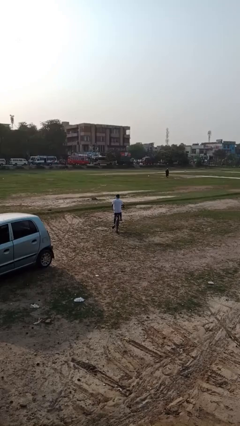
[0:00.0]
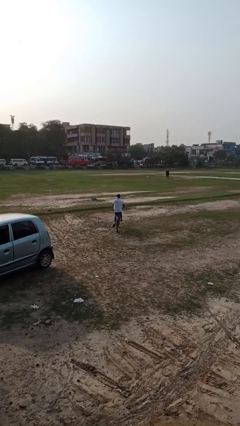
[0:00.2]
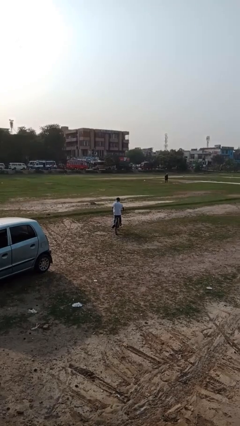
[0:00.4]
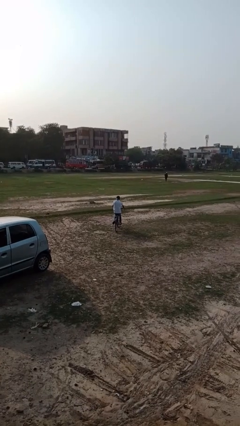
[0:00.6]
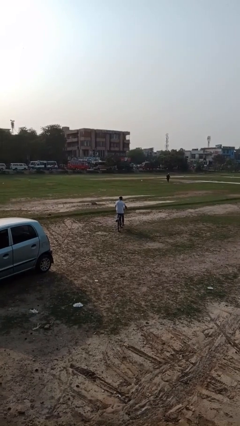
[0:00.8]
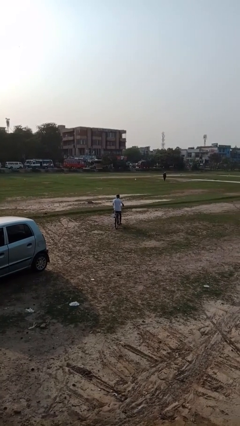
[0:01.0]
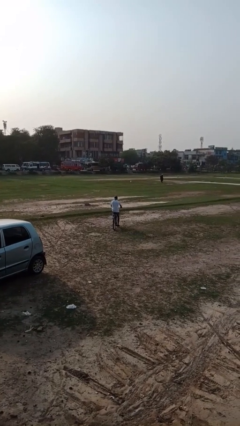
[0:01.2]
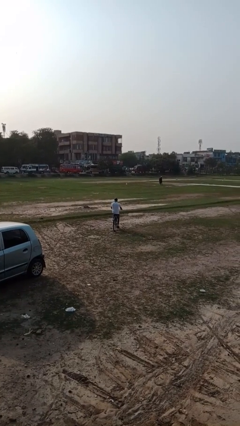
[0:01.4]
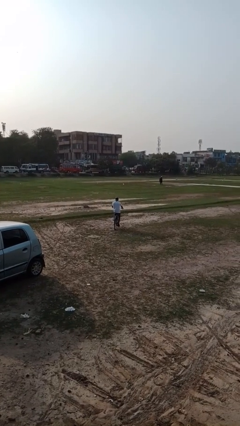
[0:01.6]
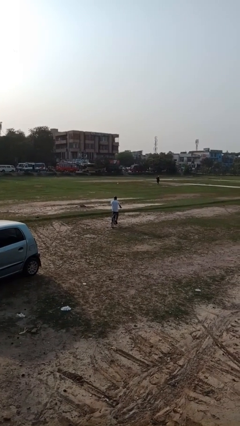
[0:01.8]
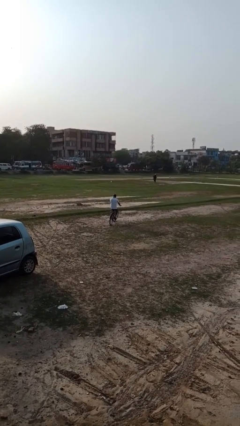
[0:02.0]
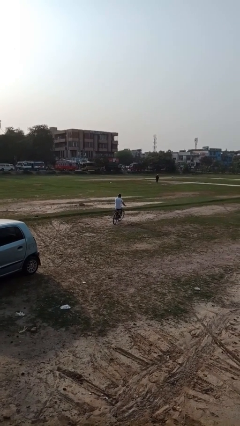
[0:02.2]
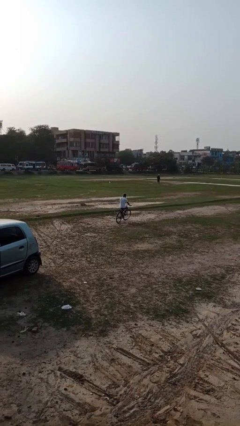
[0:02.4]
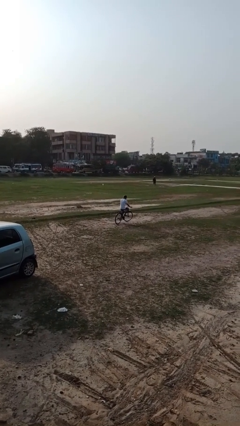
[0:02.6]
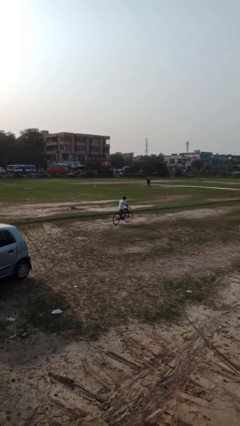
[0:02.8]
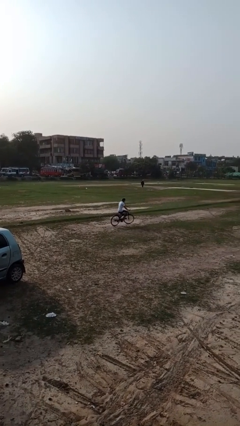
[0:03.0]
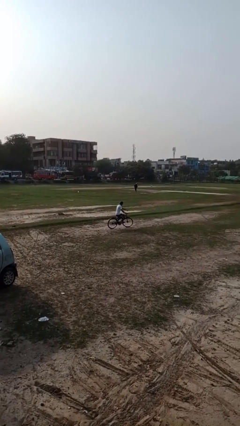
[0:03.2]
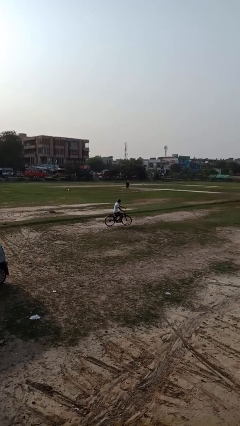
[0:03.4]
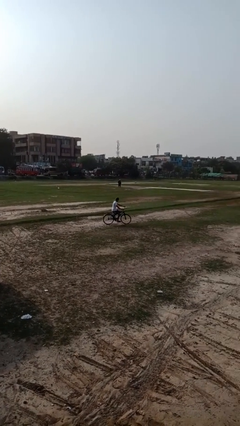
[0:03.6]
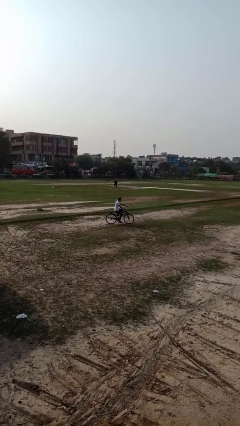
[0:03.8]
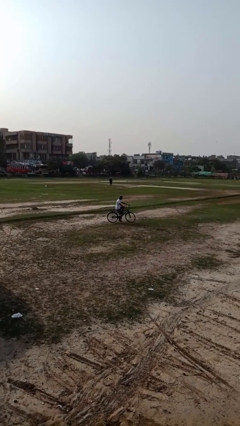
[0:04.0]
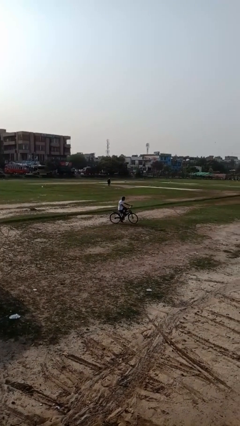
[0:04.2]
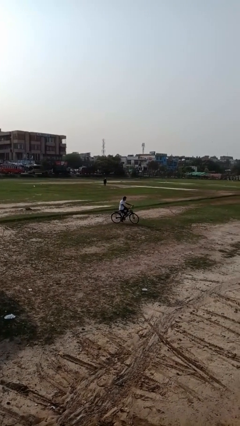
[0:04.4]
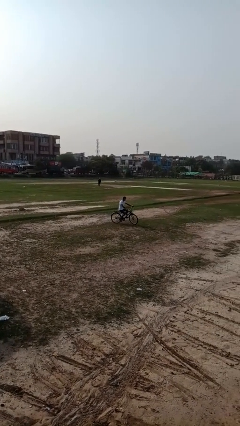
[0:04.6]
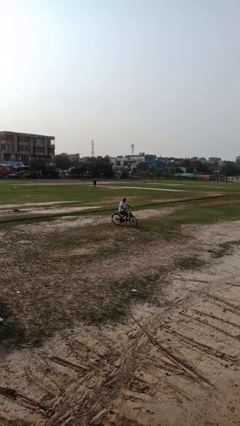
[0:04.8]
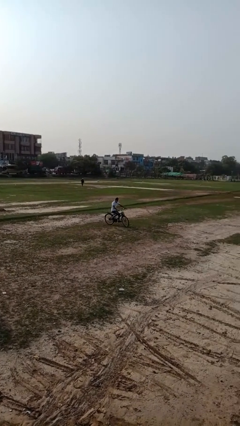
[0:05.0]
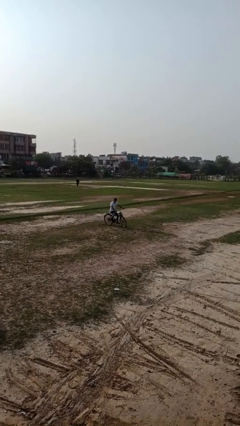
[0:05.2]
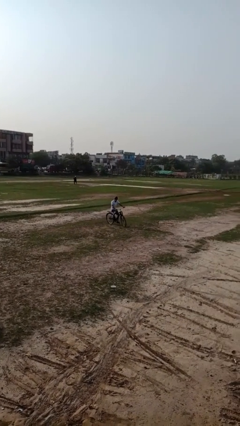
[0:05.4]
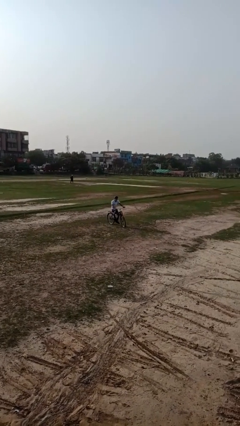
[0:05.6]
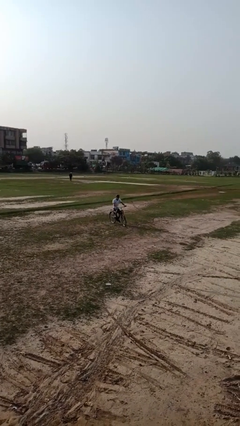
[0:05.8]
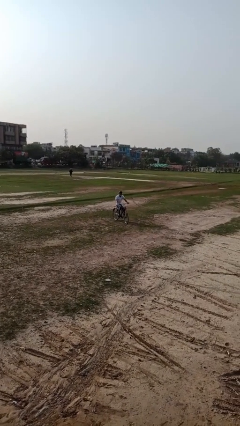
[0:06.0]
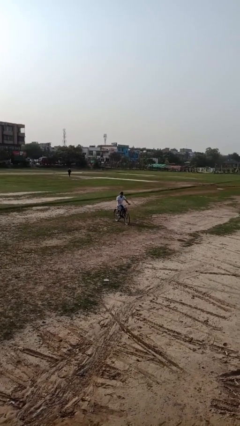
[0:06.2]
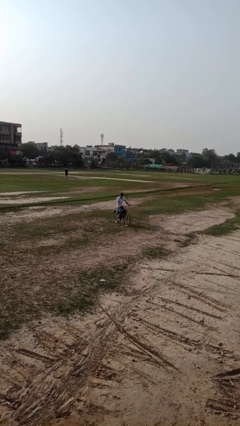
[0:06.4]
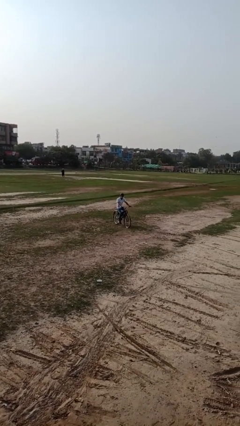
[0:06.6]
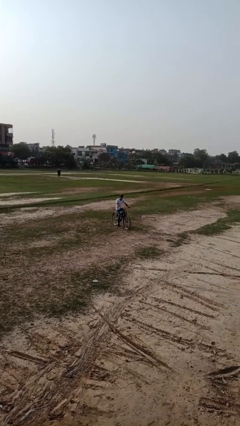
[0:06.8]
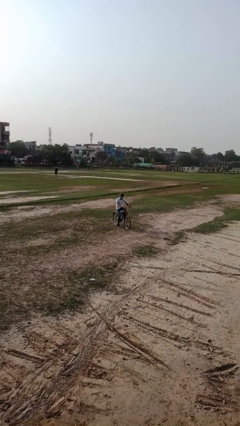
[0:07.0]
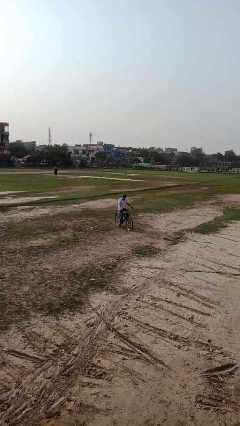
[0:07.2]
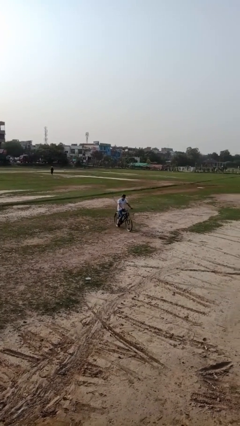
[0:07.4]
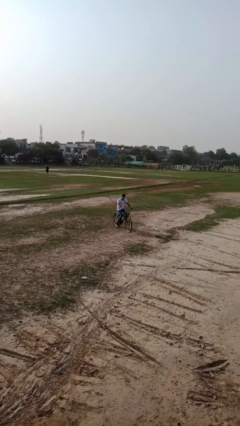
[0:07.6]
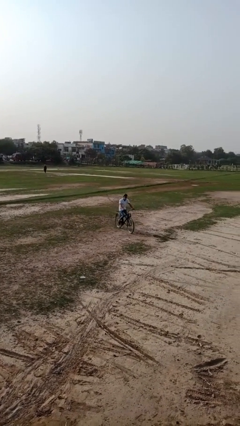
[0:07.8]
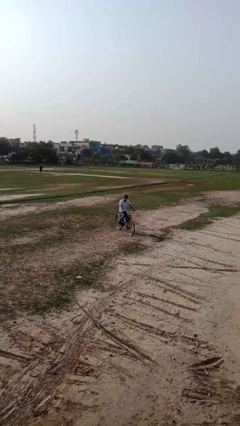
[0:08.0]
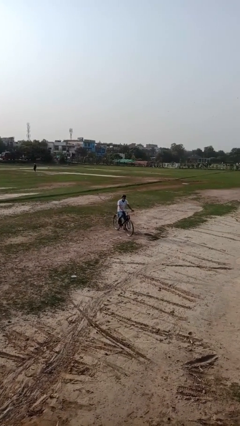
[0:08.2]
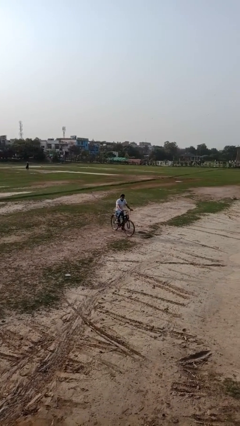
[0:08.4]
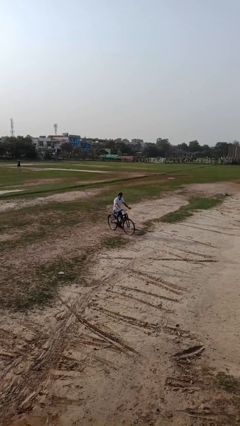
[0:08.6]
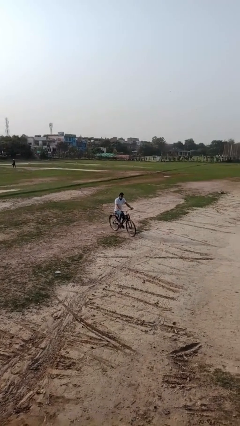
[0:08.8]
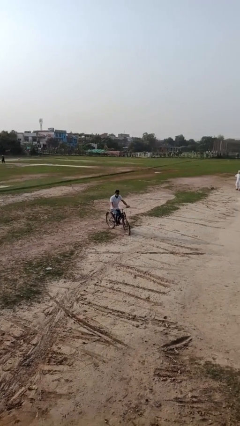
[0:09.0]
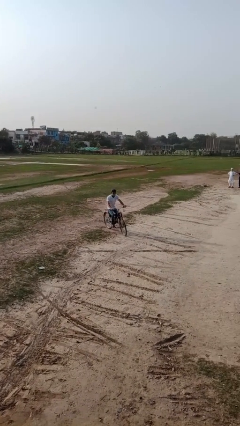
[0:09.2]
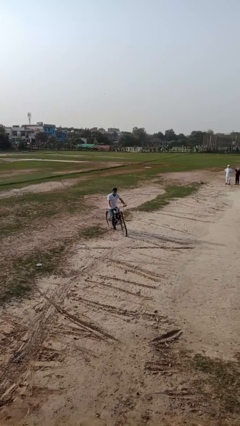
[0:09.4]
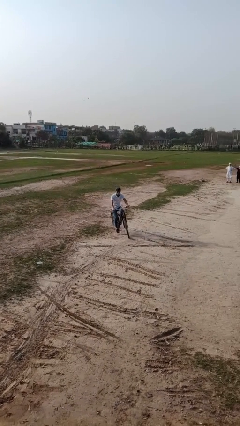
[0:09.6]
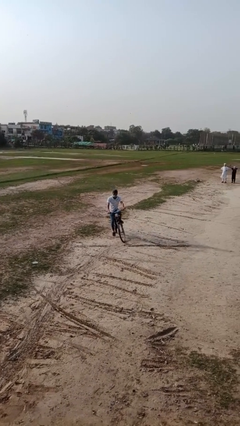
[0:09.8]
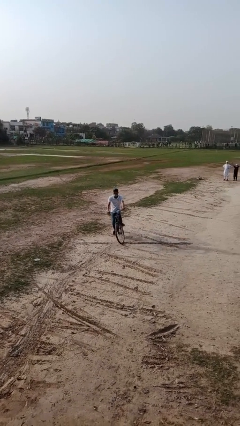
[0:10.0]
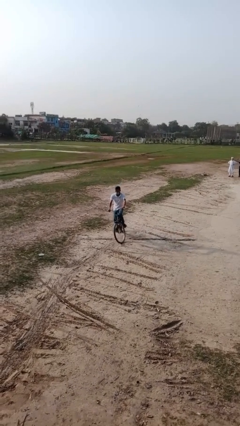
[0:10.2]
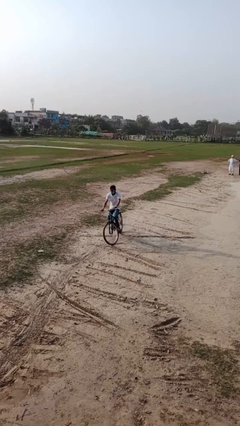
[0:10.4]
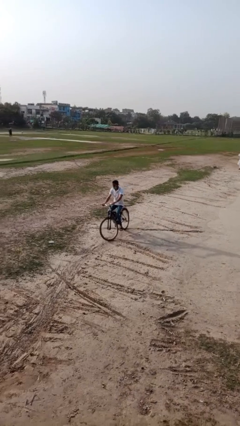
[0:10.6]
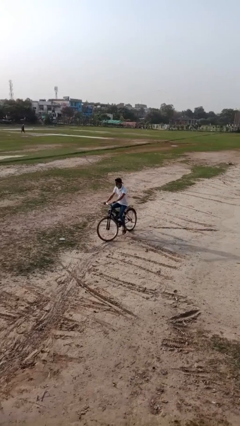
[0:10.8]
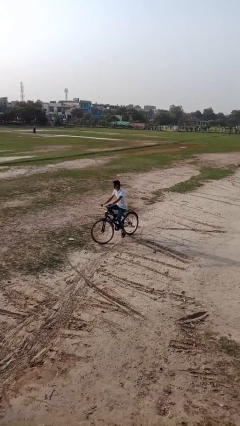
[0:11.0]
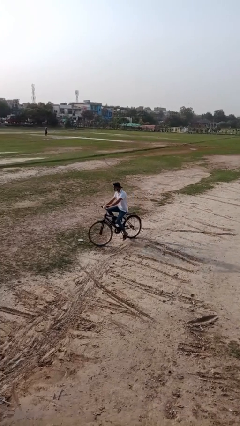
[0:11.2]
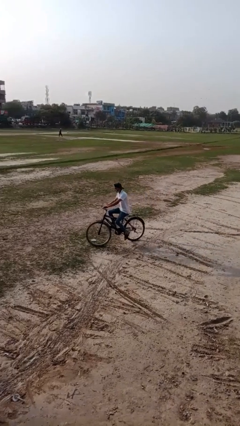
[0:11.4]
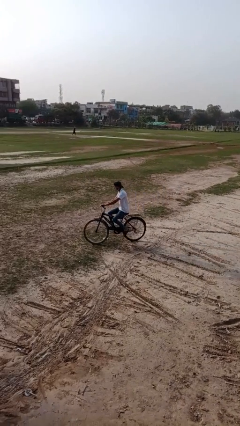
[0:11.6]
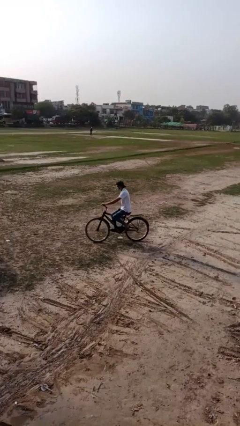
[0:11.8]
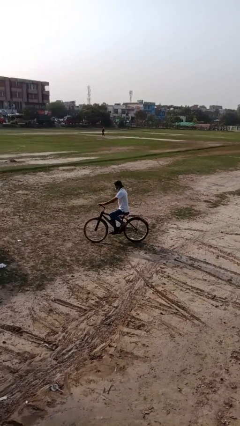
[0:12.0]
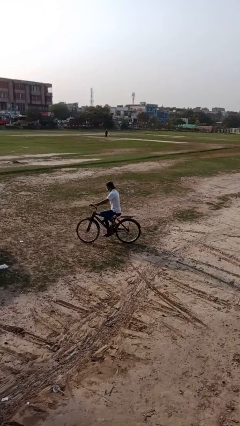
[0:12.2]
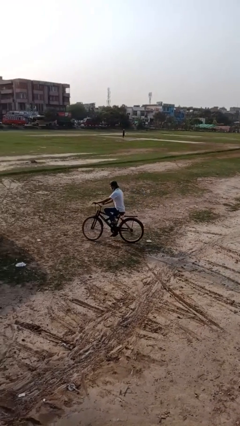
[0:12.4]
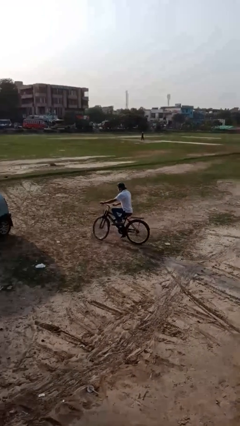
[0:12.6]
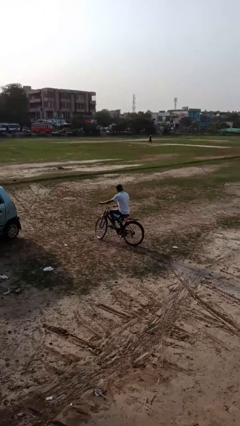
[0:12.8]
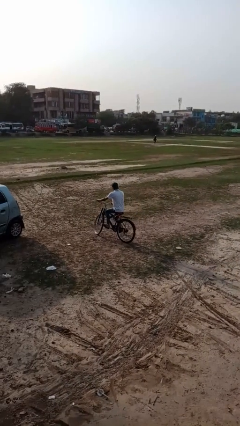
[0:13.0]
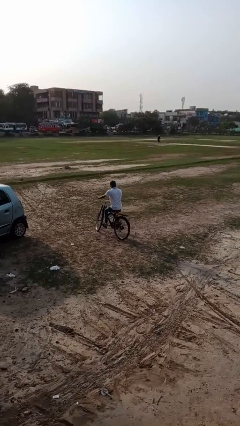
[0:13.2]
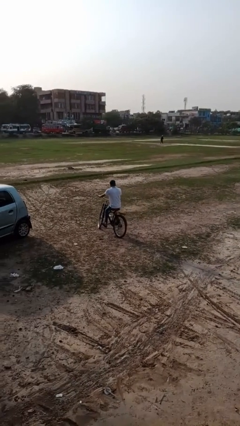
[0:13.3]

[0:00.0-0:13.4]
person rides bicycle

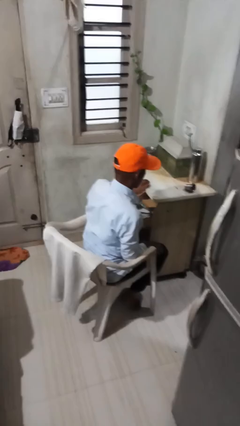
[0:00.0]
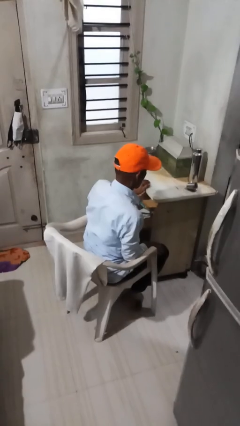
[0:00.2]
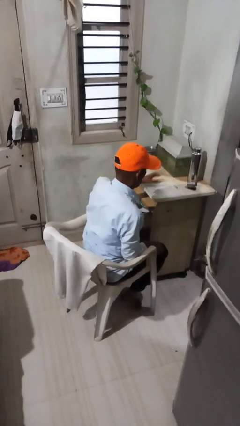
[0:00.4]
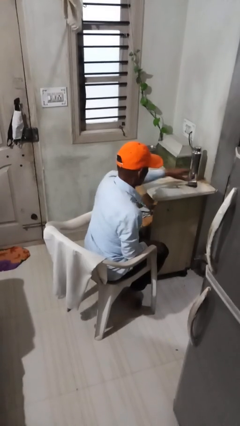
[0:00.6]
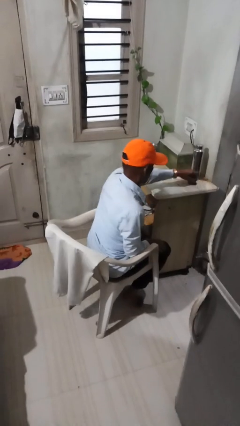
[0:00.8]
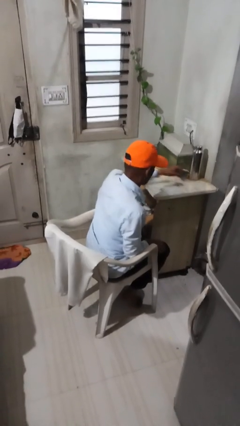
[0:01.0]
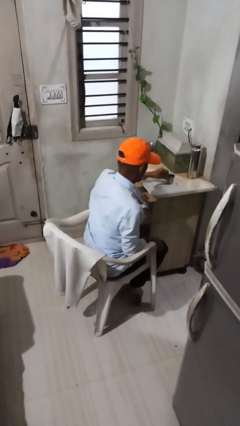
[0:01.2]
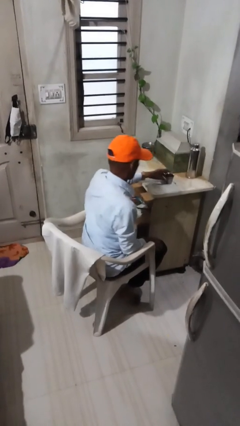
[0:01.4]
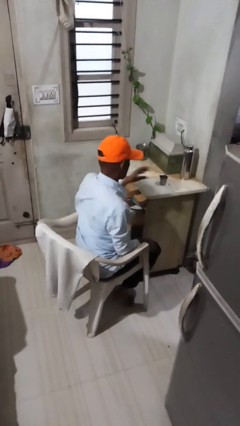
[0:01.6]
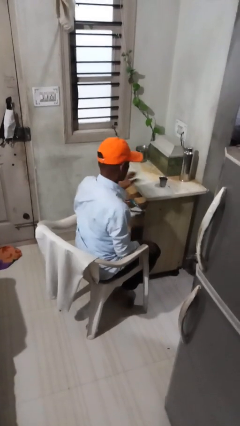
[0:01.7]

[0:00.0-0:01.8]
person sets upright glass

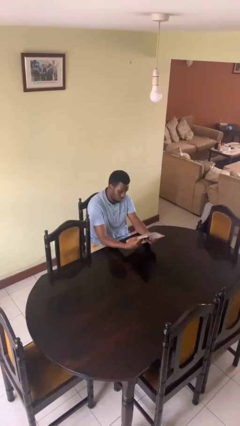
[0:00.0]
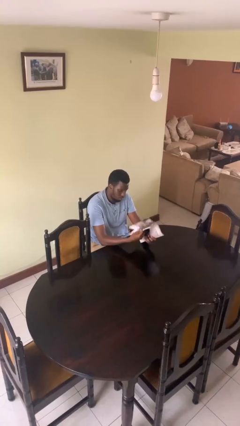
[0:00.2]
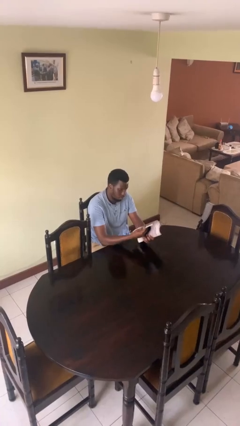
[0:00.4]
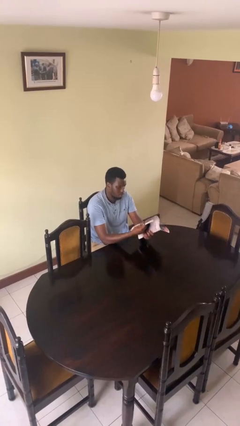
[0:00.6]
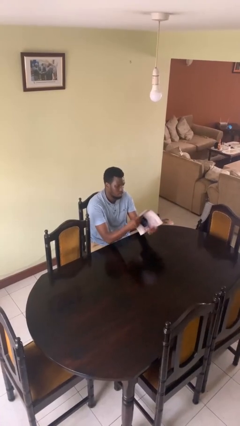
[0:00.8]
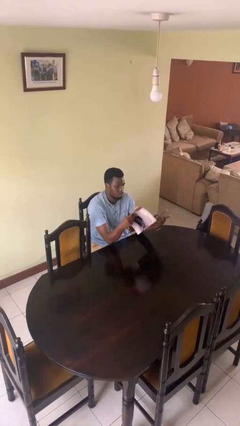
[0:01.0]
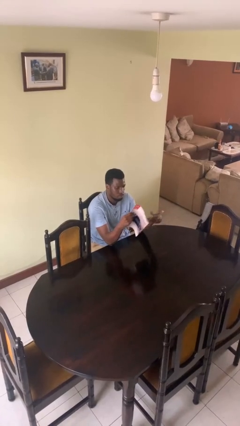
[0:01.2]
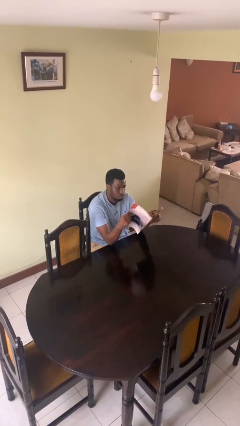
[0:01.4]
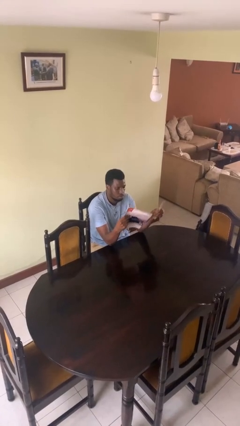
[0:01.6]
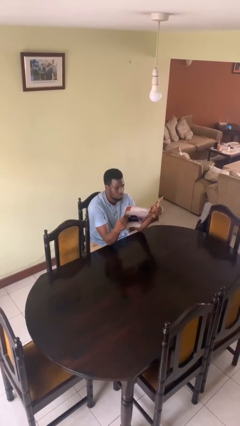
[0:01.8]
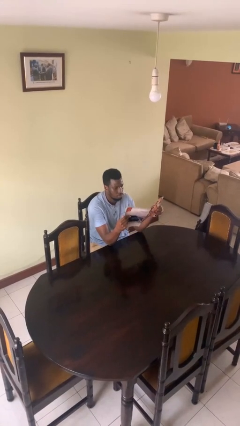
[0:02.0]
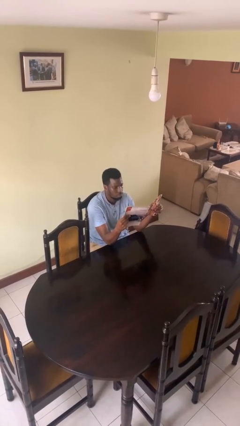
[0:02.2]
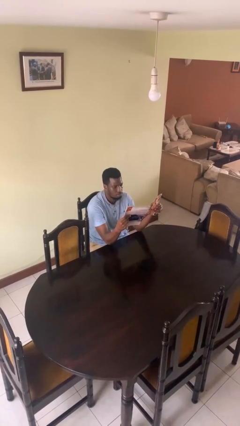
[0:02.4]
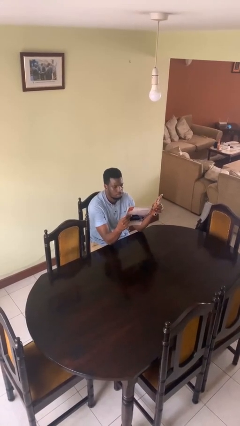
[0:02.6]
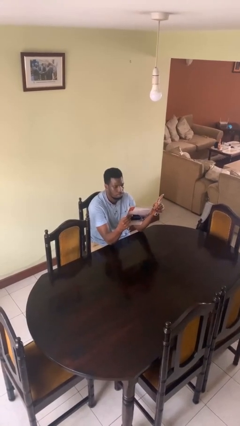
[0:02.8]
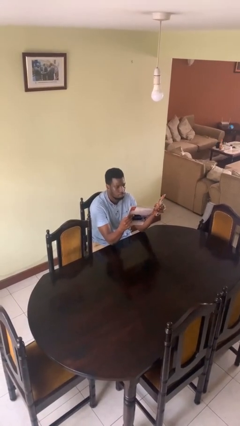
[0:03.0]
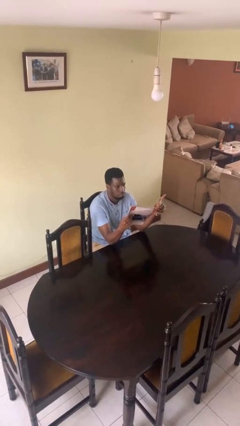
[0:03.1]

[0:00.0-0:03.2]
person reads document
